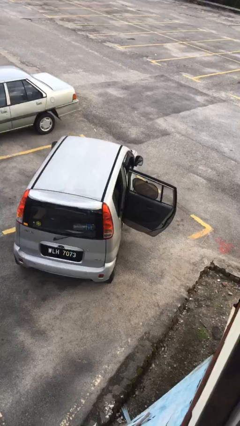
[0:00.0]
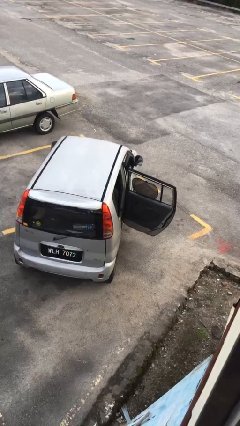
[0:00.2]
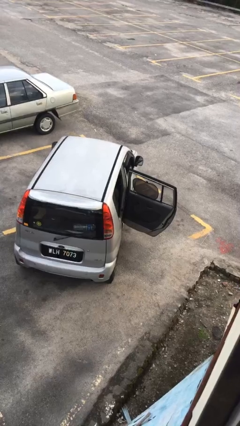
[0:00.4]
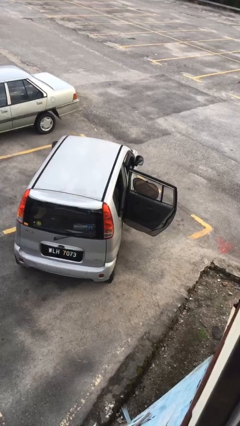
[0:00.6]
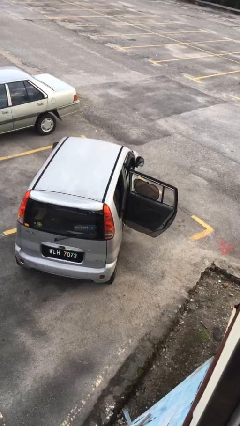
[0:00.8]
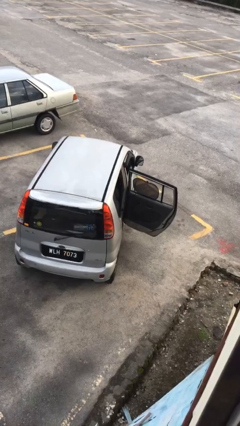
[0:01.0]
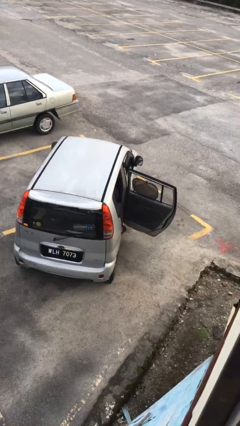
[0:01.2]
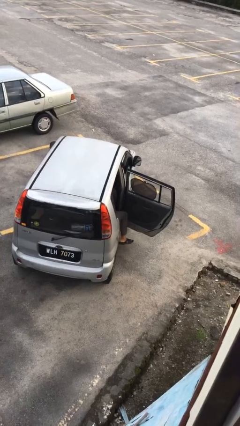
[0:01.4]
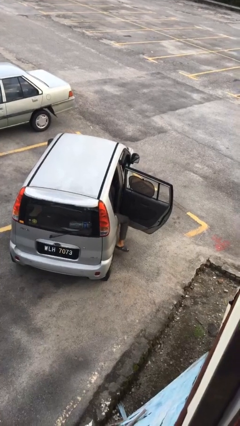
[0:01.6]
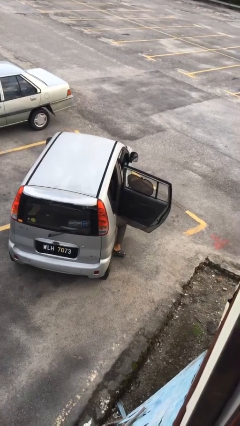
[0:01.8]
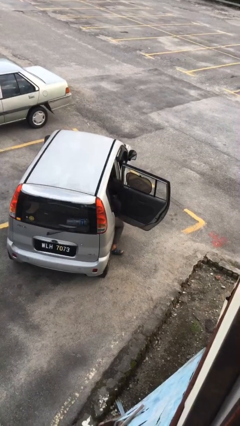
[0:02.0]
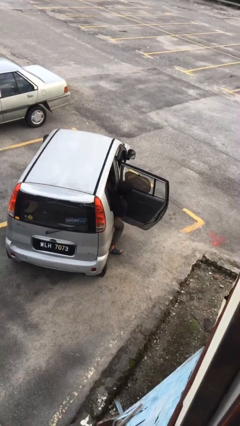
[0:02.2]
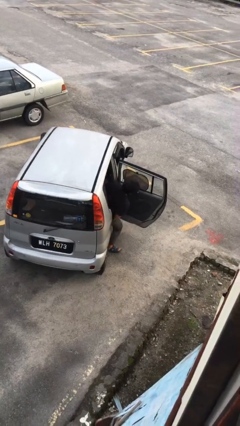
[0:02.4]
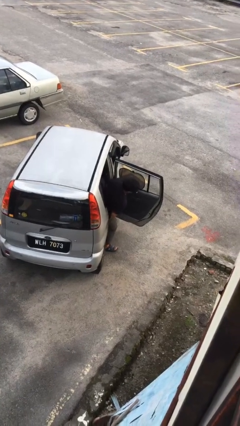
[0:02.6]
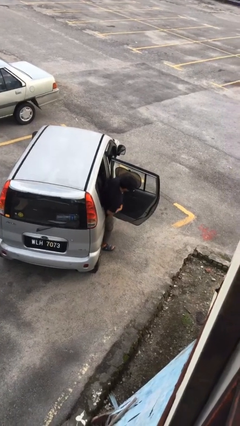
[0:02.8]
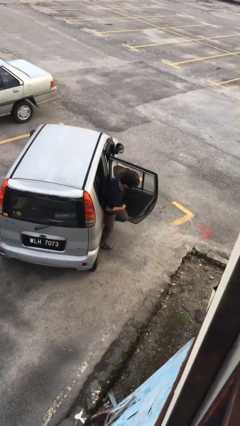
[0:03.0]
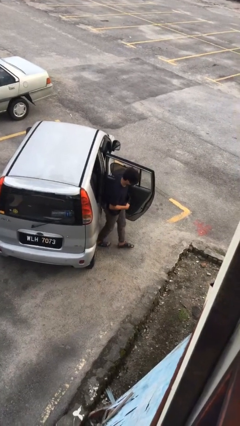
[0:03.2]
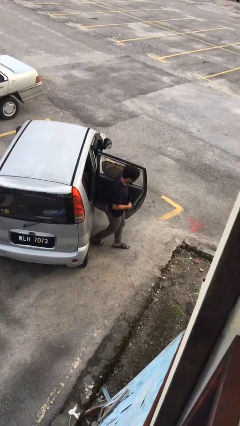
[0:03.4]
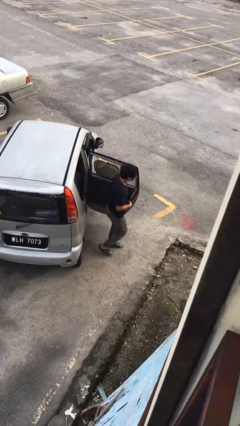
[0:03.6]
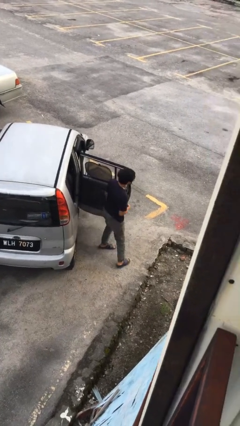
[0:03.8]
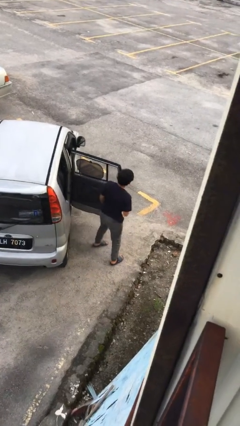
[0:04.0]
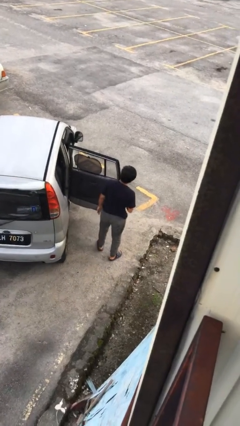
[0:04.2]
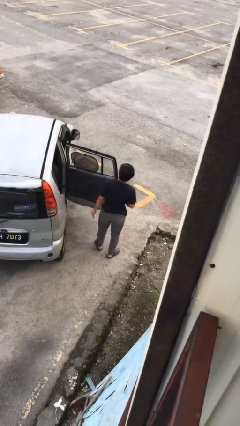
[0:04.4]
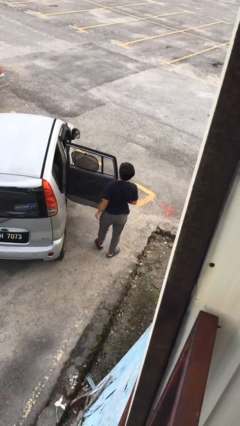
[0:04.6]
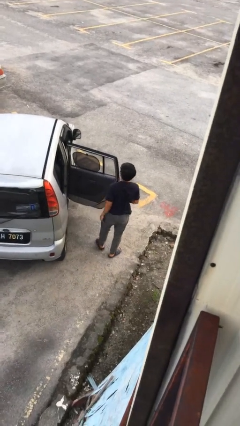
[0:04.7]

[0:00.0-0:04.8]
person exits car

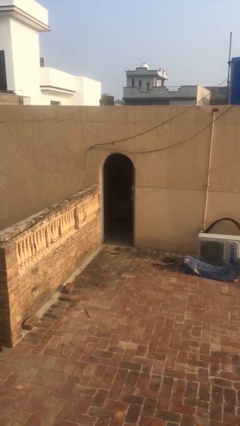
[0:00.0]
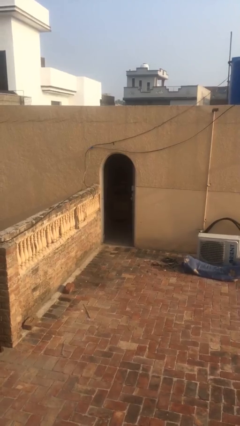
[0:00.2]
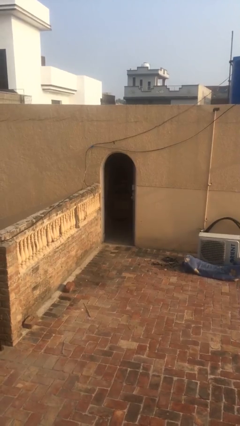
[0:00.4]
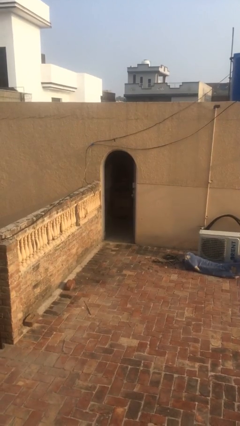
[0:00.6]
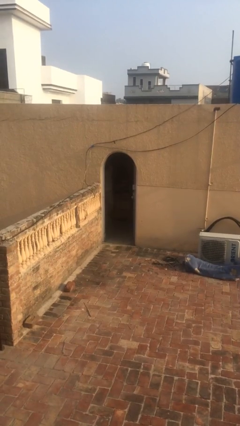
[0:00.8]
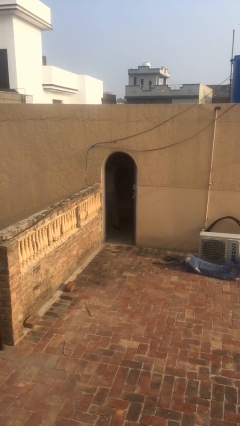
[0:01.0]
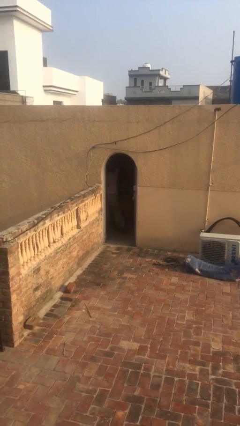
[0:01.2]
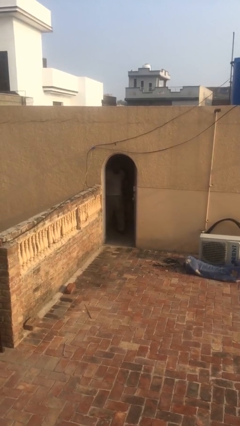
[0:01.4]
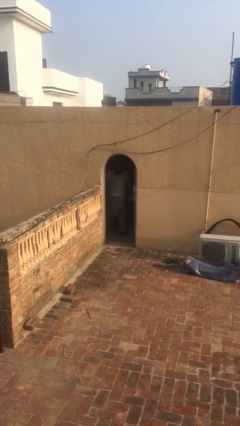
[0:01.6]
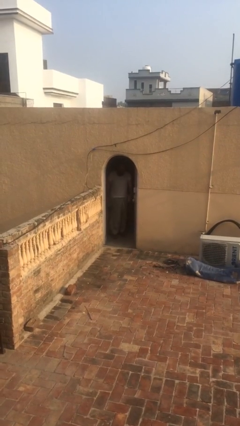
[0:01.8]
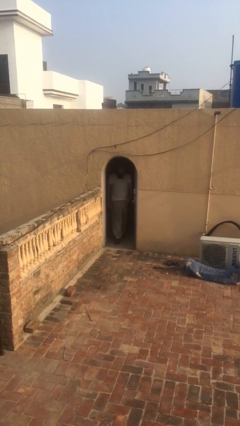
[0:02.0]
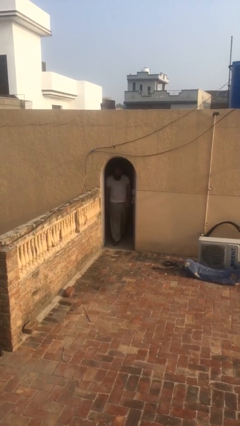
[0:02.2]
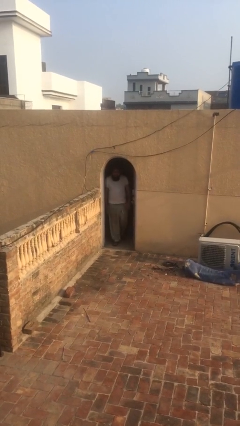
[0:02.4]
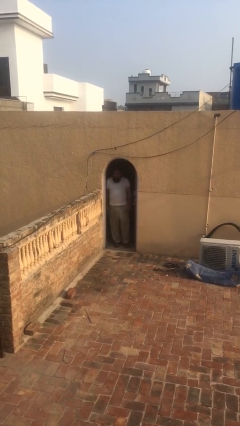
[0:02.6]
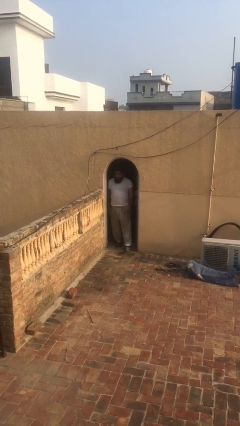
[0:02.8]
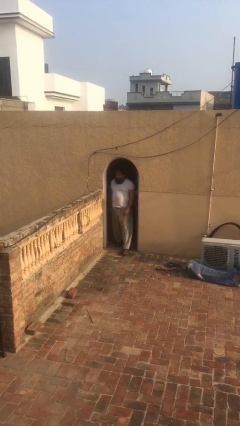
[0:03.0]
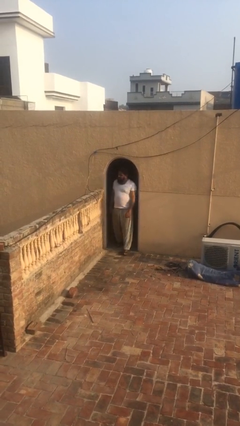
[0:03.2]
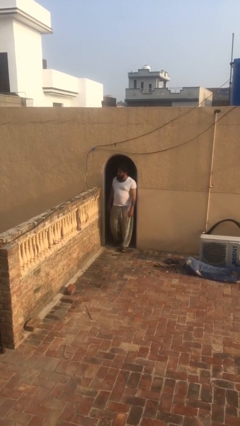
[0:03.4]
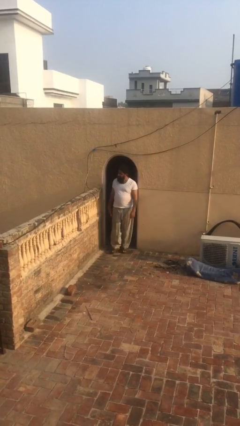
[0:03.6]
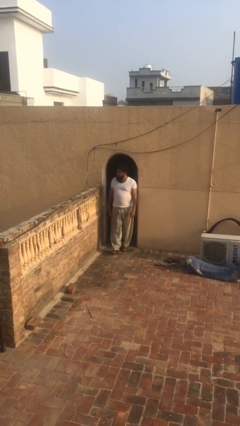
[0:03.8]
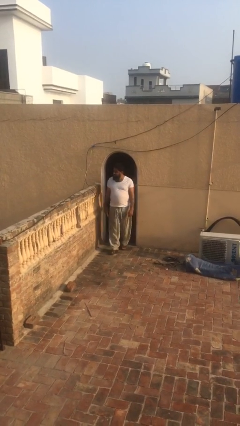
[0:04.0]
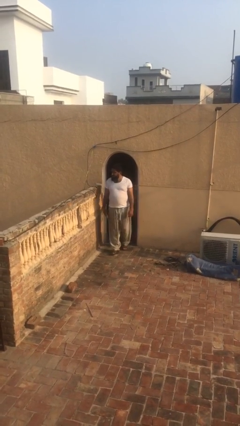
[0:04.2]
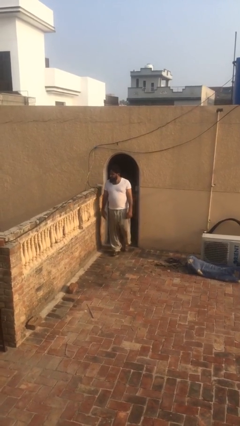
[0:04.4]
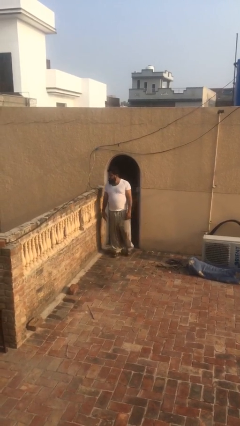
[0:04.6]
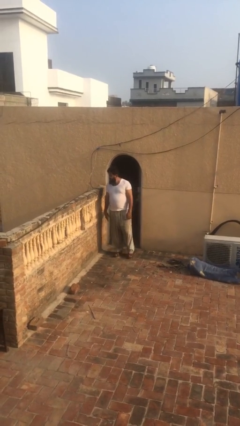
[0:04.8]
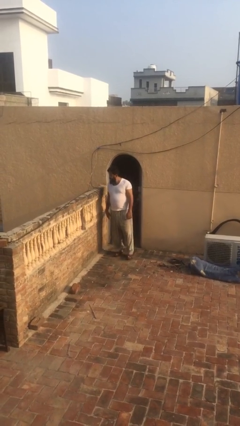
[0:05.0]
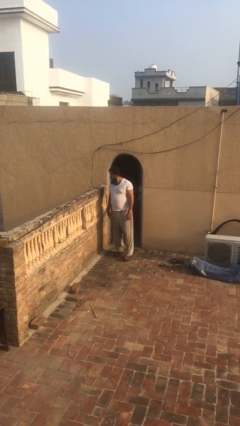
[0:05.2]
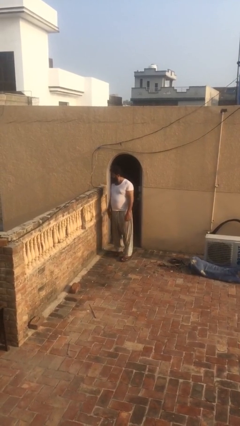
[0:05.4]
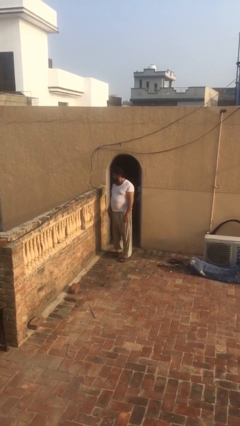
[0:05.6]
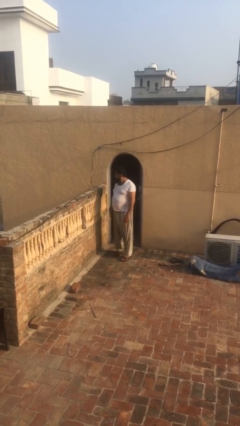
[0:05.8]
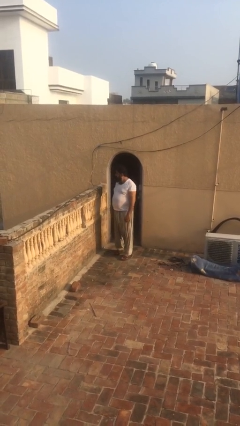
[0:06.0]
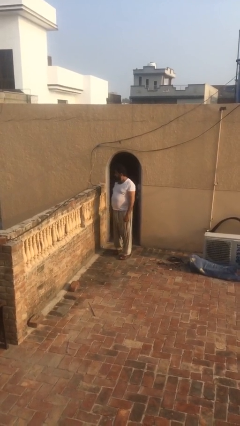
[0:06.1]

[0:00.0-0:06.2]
person enters scene through structure

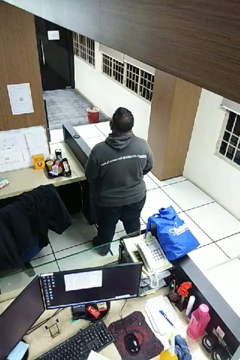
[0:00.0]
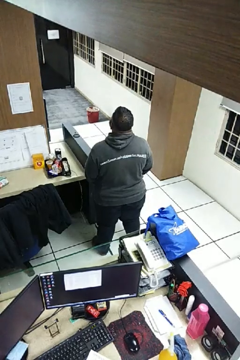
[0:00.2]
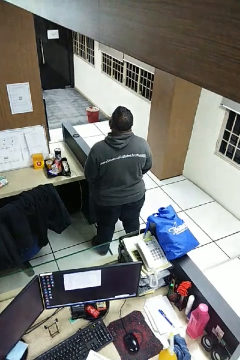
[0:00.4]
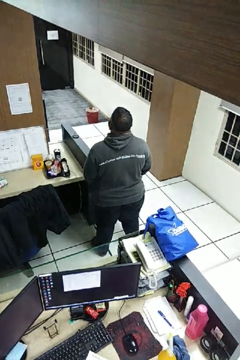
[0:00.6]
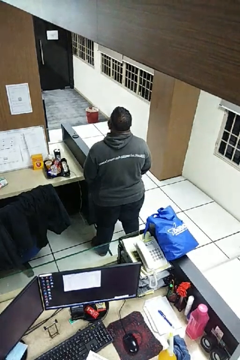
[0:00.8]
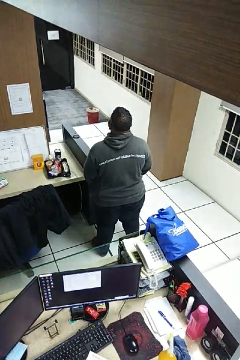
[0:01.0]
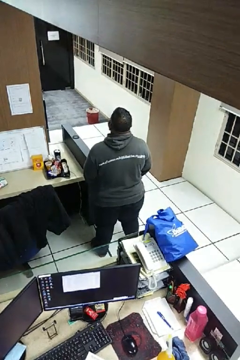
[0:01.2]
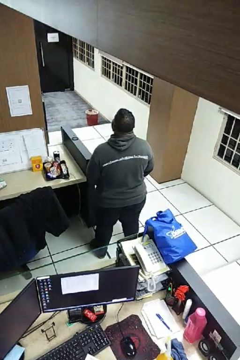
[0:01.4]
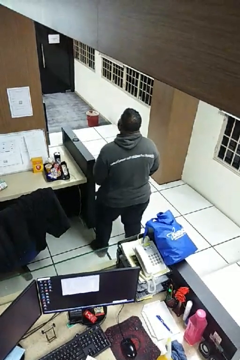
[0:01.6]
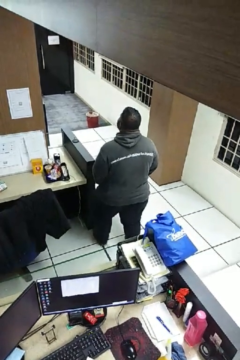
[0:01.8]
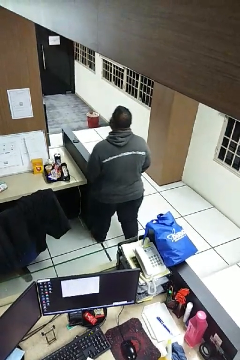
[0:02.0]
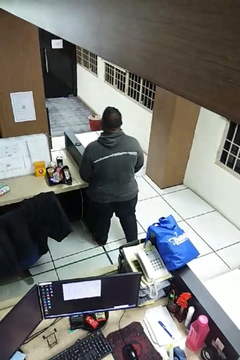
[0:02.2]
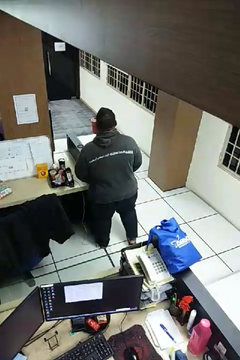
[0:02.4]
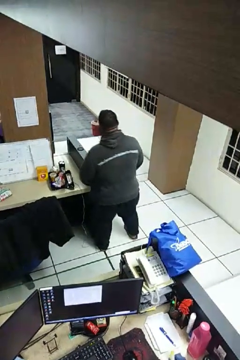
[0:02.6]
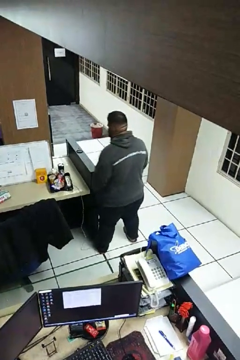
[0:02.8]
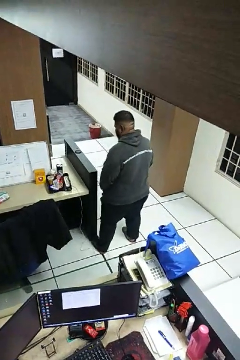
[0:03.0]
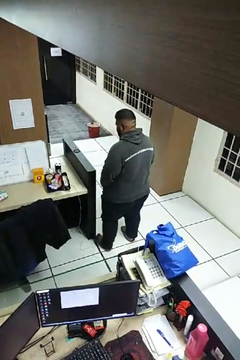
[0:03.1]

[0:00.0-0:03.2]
person bumps into table

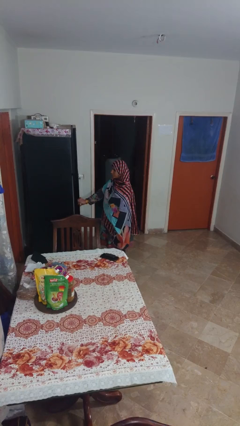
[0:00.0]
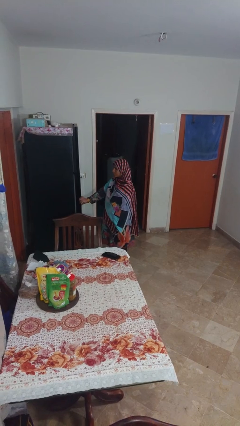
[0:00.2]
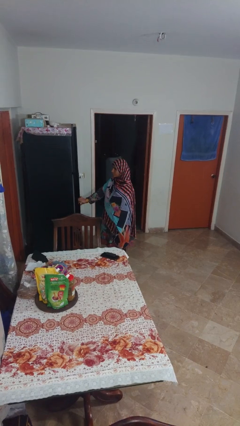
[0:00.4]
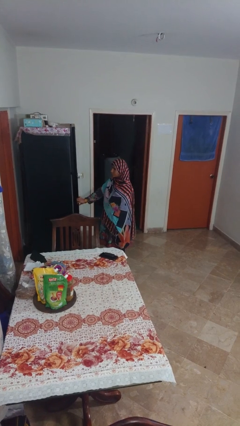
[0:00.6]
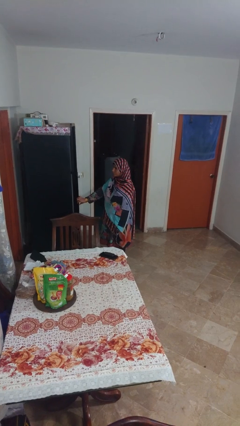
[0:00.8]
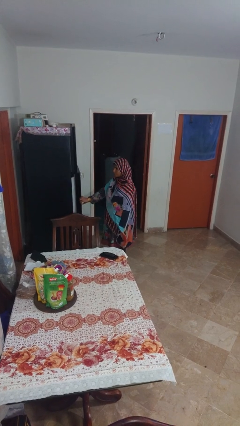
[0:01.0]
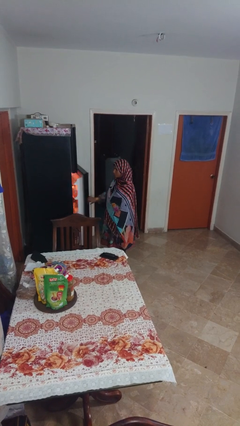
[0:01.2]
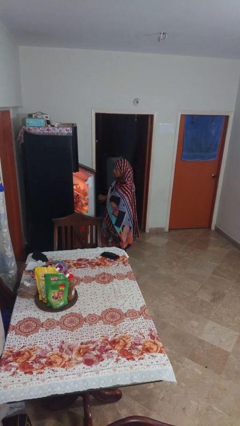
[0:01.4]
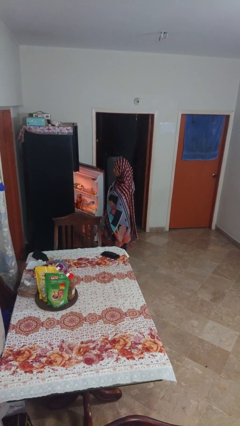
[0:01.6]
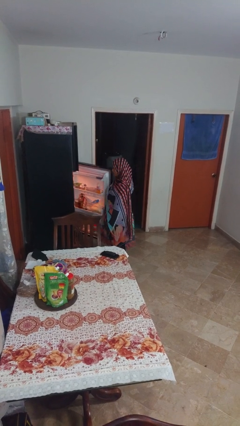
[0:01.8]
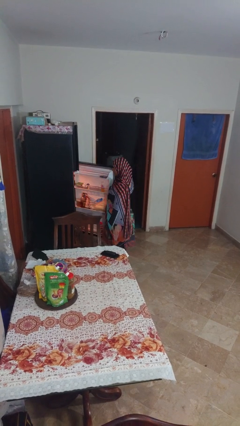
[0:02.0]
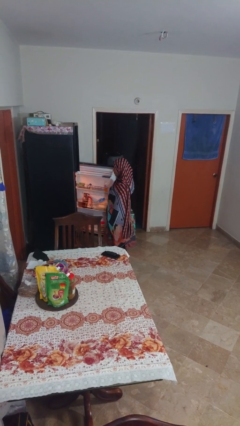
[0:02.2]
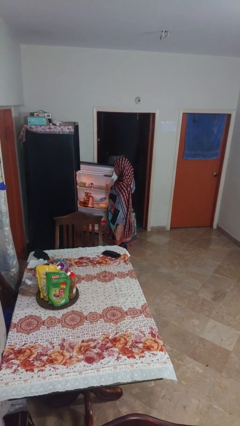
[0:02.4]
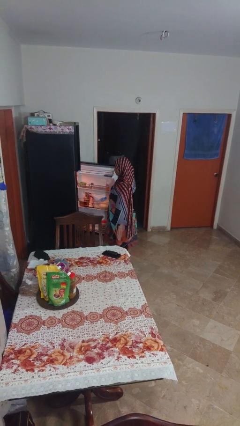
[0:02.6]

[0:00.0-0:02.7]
person opens refrigerator

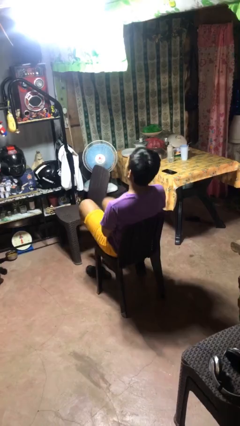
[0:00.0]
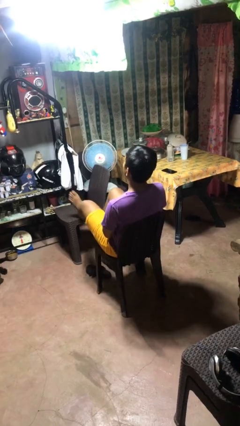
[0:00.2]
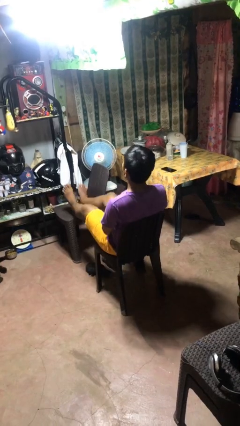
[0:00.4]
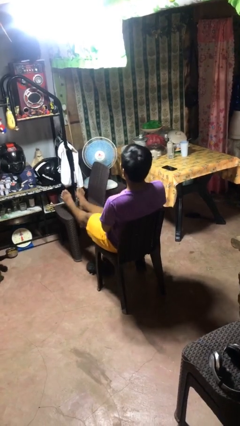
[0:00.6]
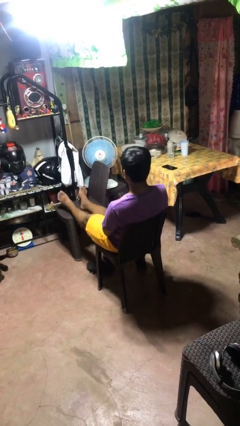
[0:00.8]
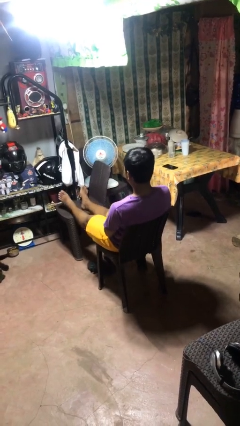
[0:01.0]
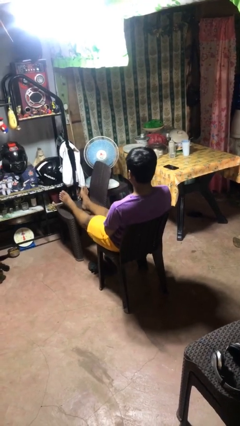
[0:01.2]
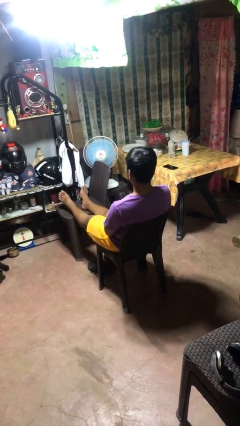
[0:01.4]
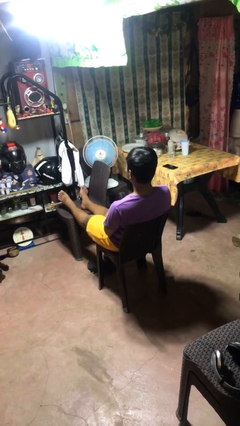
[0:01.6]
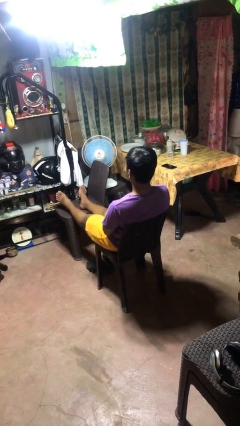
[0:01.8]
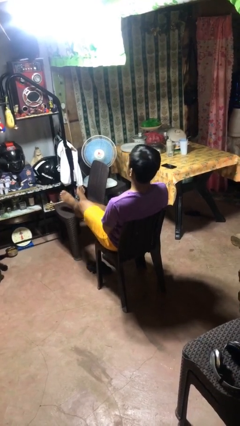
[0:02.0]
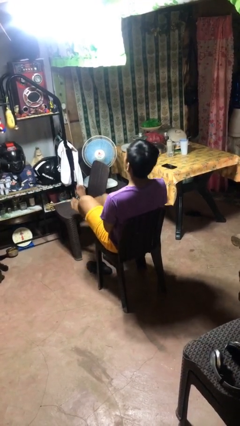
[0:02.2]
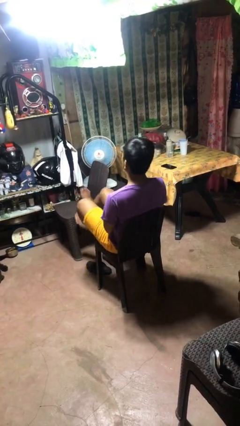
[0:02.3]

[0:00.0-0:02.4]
person puts feet up
